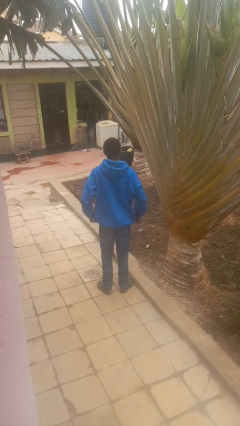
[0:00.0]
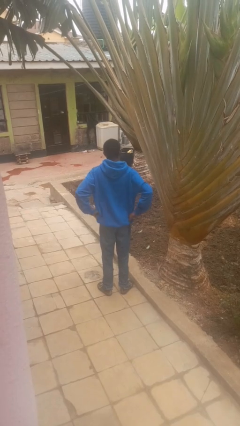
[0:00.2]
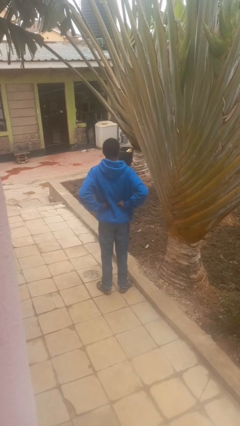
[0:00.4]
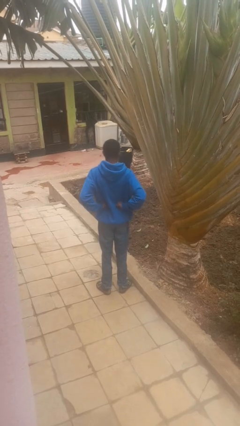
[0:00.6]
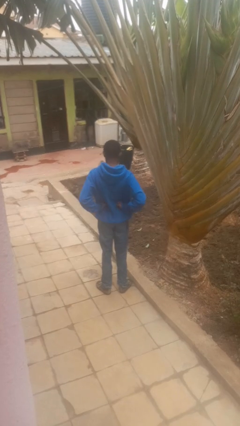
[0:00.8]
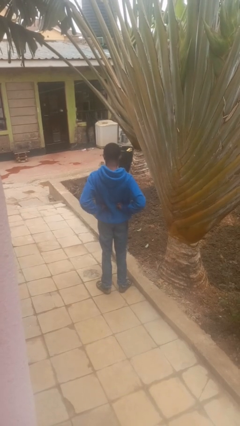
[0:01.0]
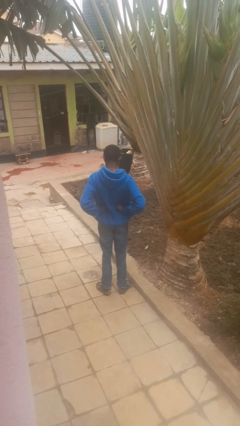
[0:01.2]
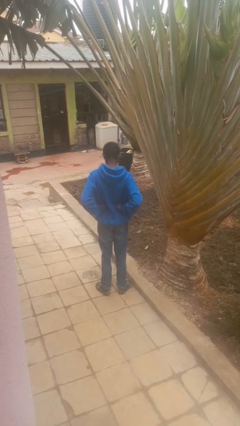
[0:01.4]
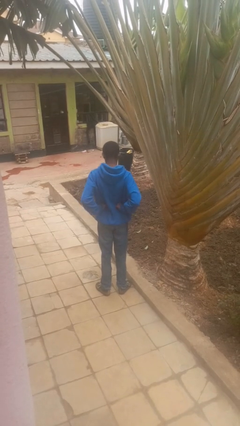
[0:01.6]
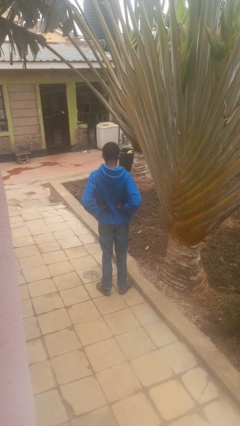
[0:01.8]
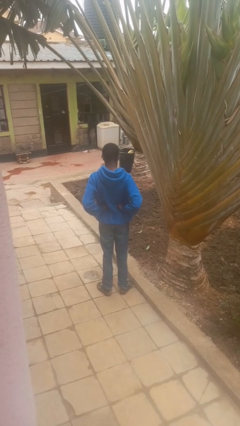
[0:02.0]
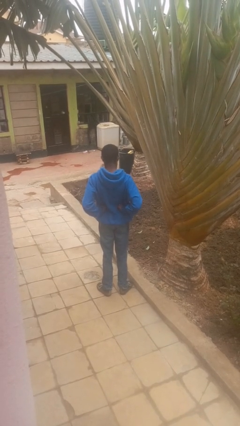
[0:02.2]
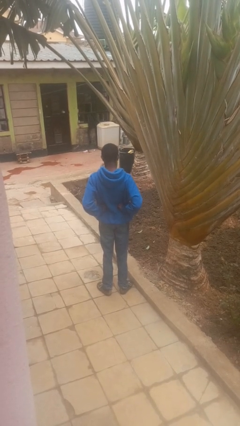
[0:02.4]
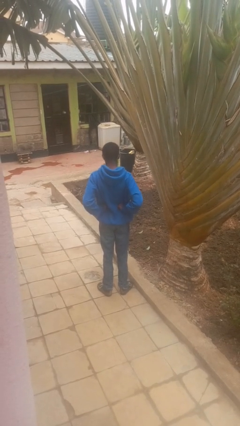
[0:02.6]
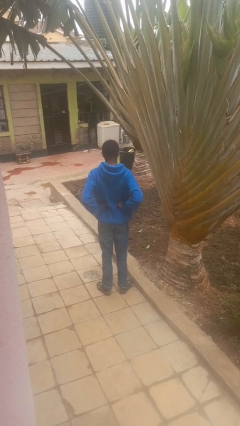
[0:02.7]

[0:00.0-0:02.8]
person stretches back

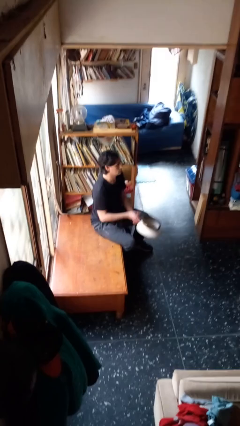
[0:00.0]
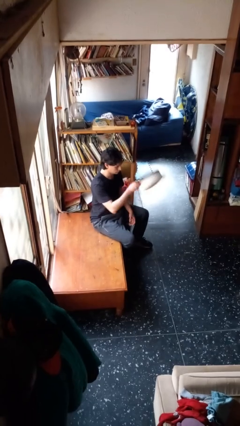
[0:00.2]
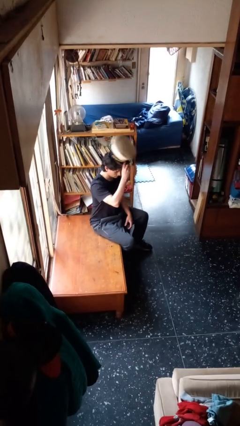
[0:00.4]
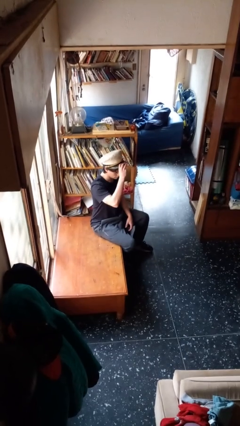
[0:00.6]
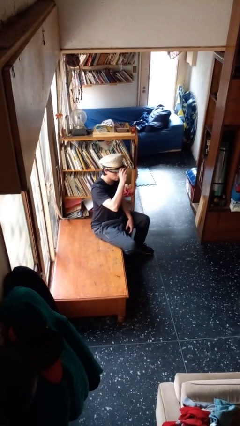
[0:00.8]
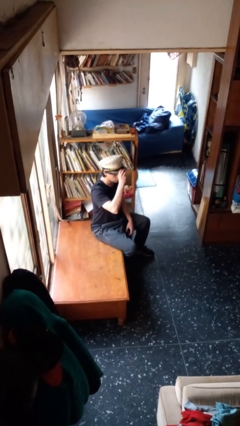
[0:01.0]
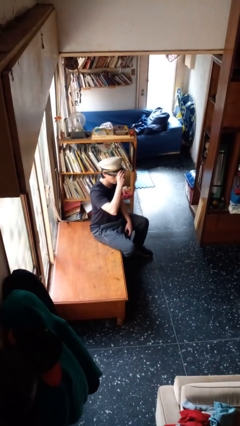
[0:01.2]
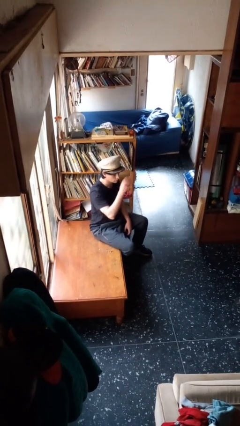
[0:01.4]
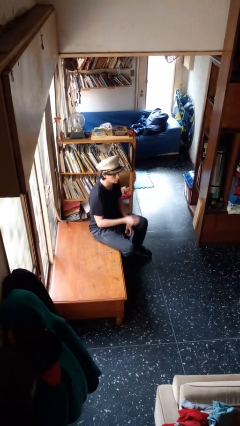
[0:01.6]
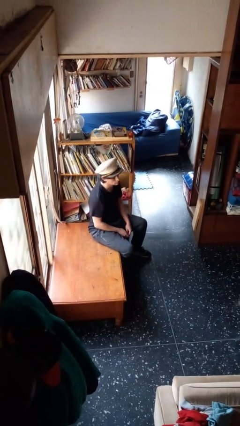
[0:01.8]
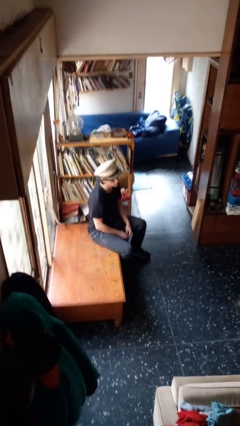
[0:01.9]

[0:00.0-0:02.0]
person puts on hat

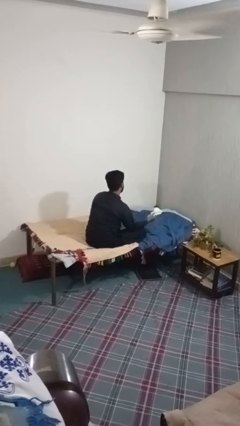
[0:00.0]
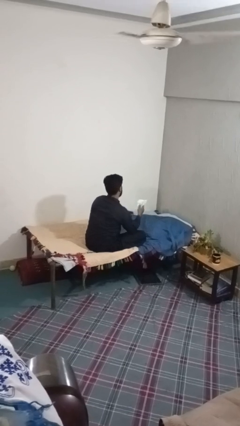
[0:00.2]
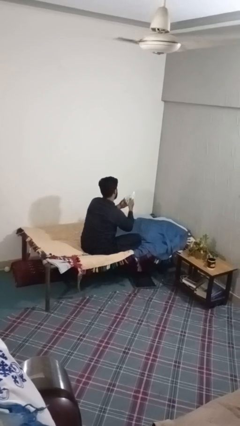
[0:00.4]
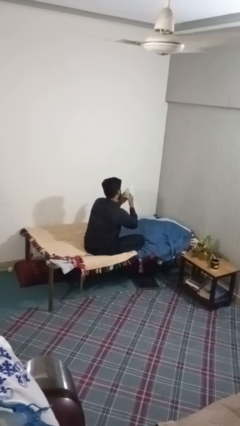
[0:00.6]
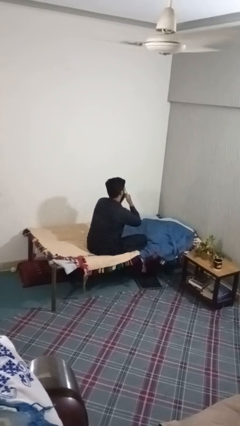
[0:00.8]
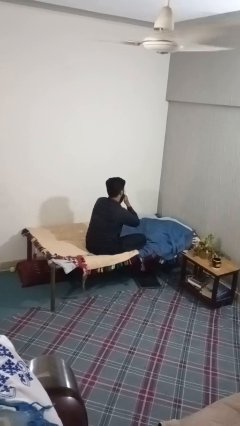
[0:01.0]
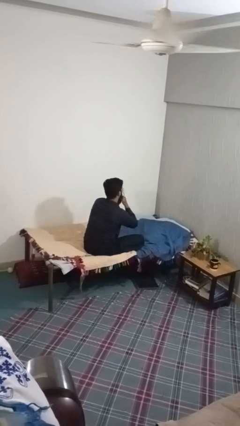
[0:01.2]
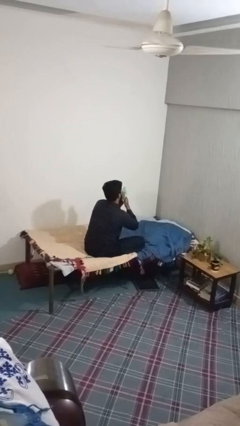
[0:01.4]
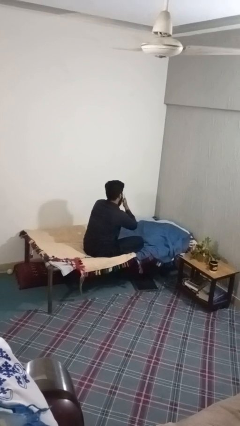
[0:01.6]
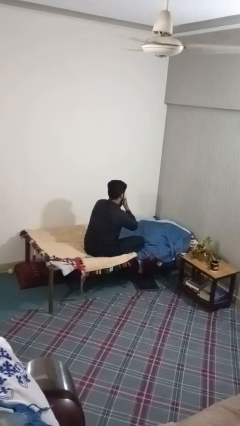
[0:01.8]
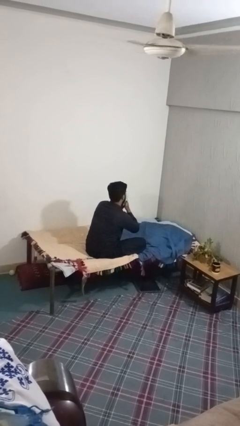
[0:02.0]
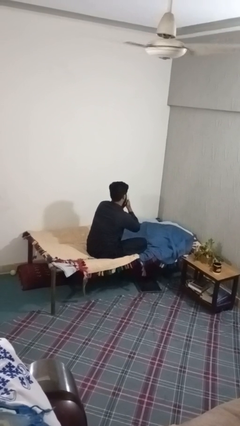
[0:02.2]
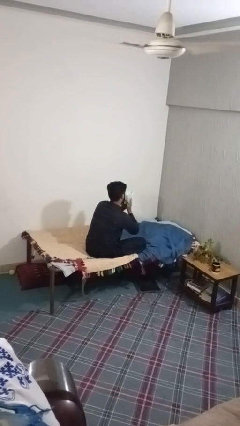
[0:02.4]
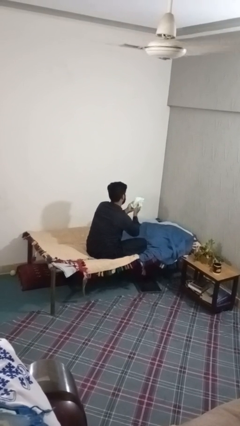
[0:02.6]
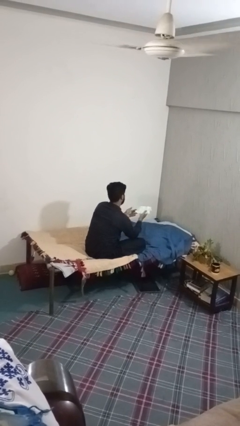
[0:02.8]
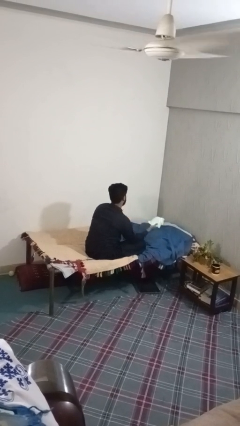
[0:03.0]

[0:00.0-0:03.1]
person blows nose

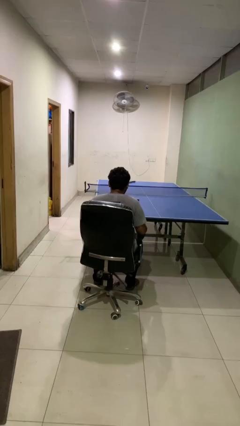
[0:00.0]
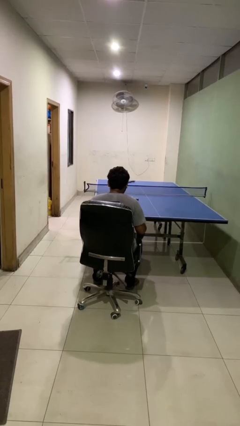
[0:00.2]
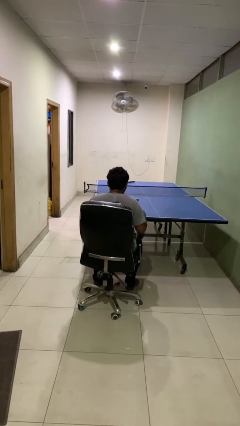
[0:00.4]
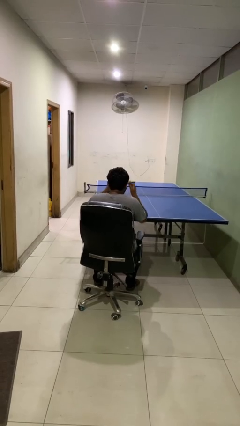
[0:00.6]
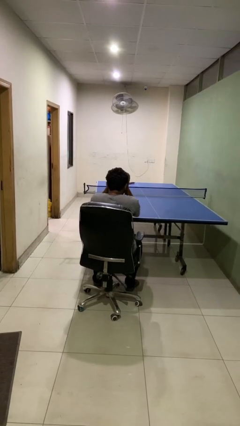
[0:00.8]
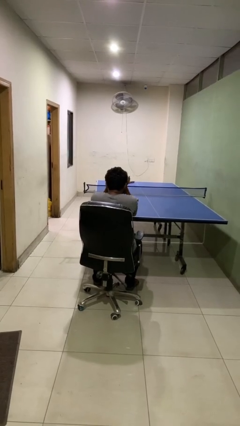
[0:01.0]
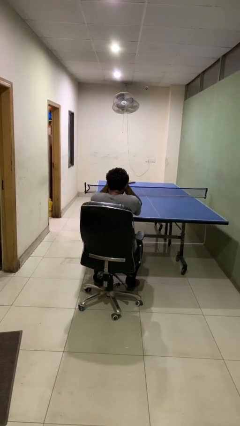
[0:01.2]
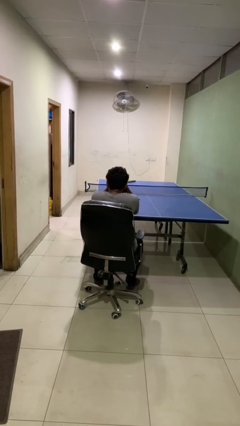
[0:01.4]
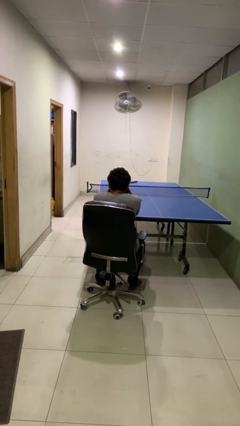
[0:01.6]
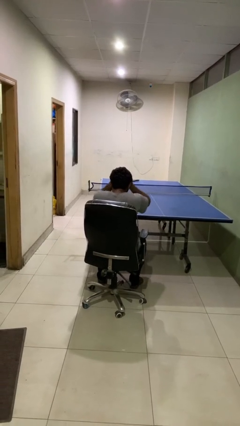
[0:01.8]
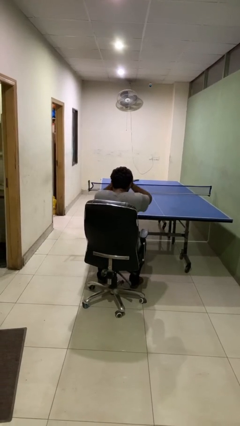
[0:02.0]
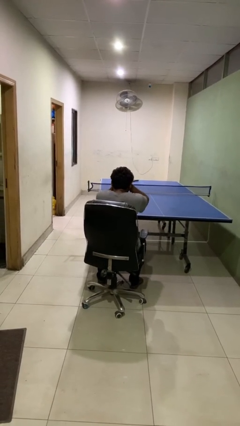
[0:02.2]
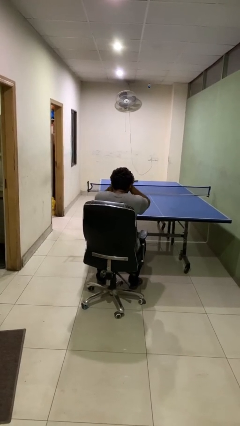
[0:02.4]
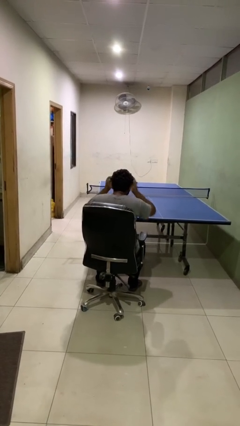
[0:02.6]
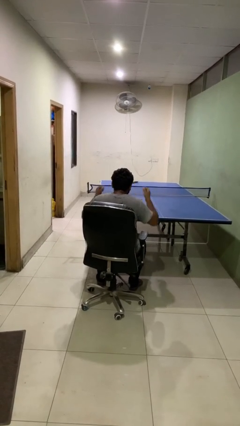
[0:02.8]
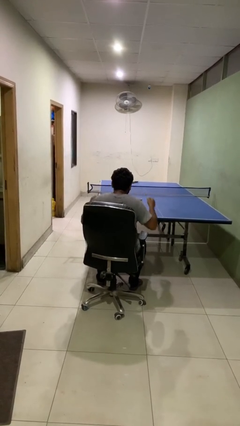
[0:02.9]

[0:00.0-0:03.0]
person rubs eyes

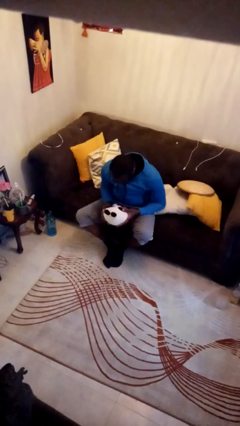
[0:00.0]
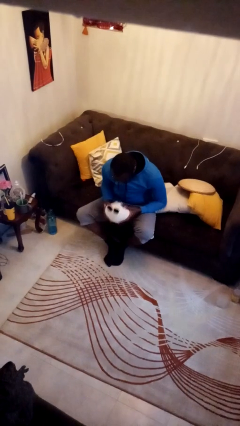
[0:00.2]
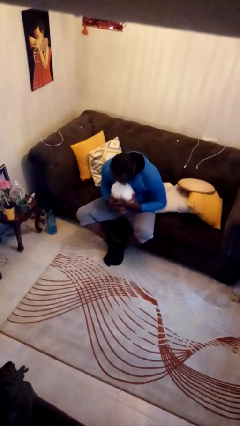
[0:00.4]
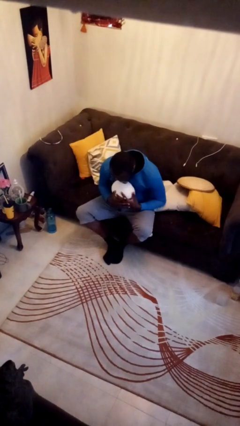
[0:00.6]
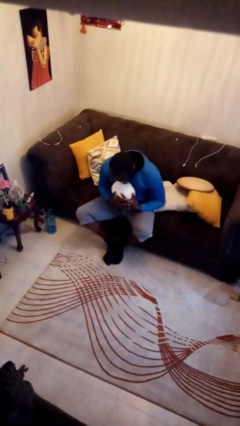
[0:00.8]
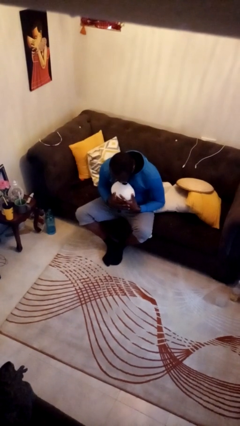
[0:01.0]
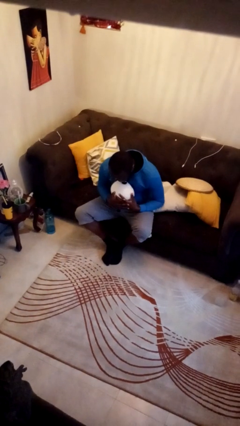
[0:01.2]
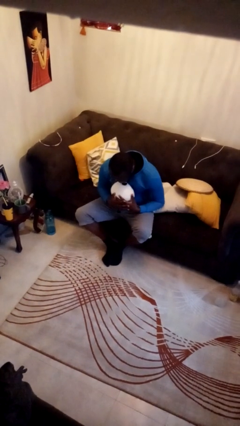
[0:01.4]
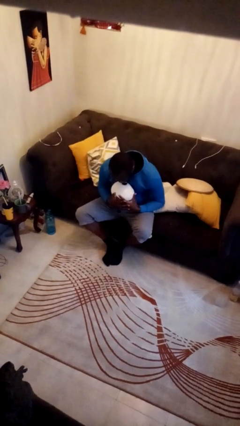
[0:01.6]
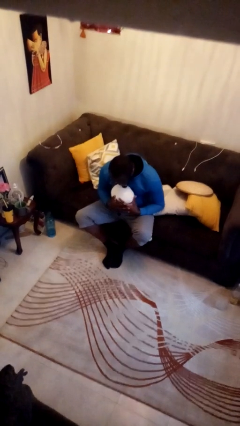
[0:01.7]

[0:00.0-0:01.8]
person hugs stuffed animal

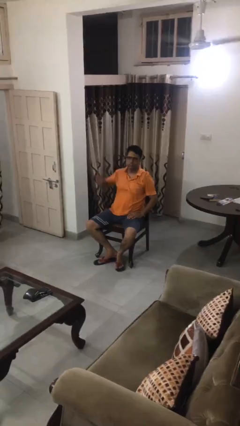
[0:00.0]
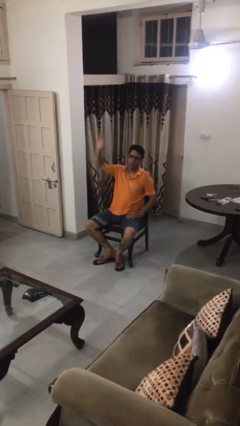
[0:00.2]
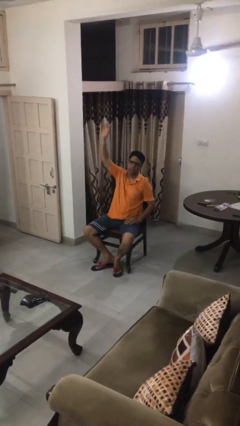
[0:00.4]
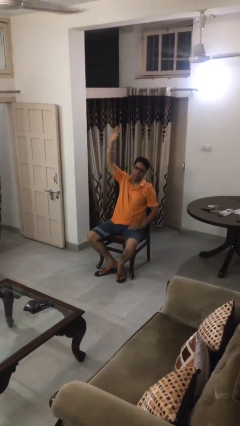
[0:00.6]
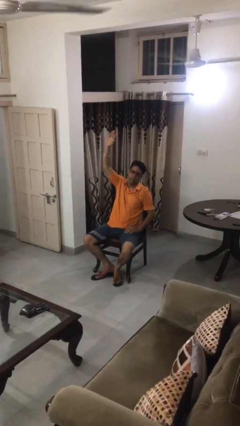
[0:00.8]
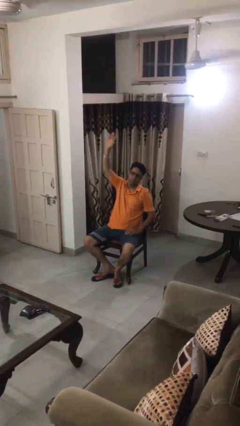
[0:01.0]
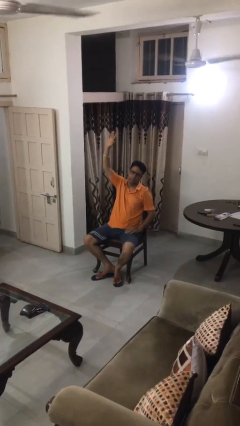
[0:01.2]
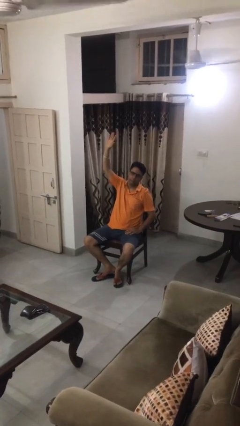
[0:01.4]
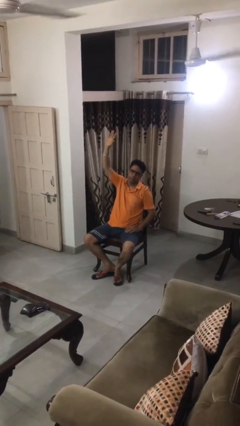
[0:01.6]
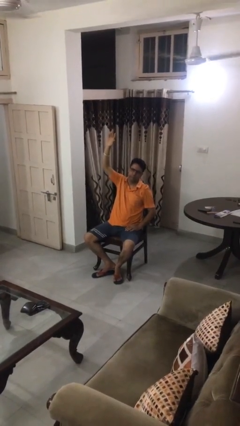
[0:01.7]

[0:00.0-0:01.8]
person gestures raise hand

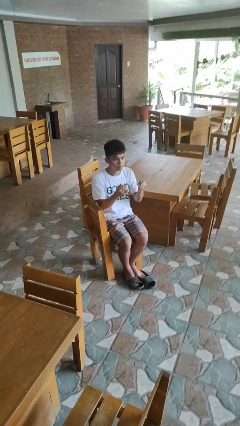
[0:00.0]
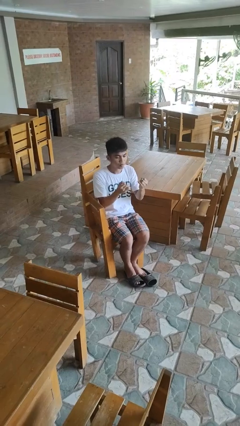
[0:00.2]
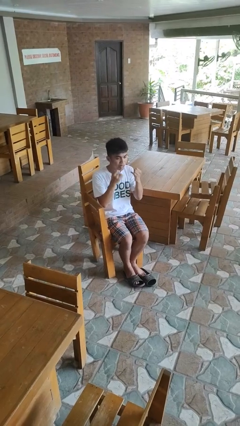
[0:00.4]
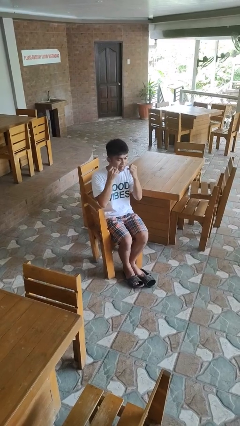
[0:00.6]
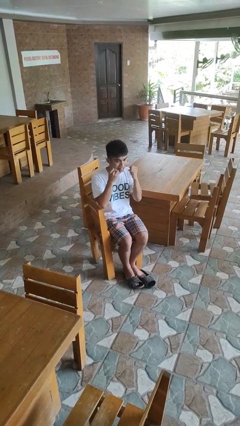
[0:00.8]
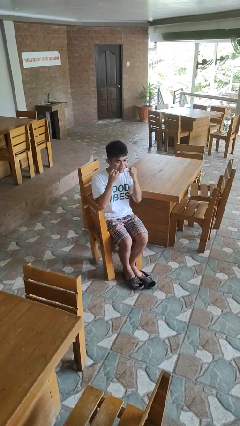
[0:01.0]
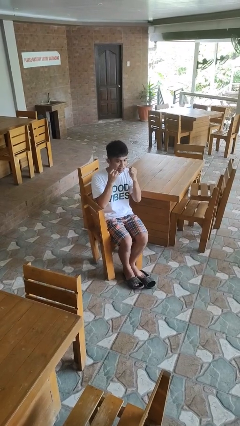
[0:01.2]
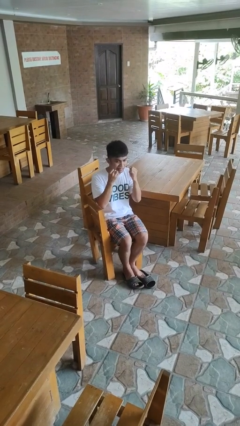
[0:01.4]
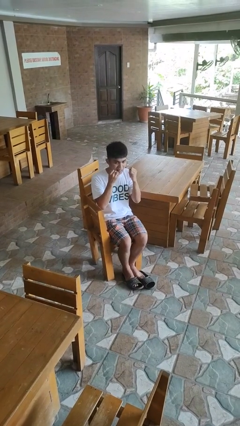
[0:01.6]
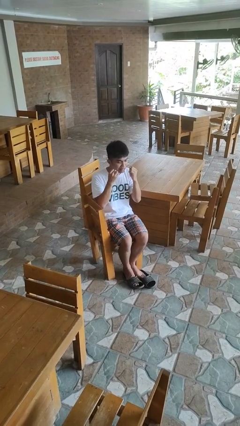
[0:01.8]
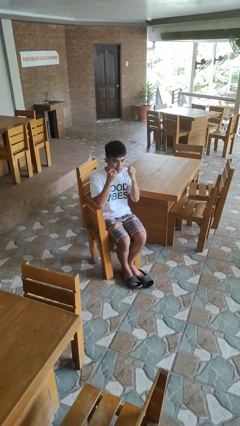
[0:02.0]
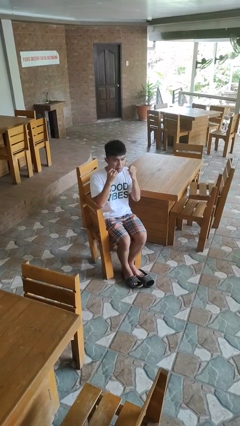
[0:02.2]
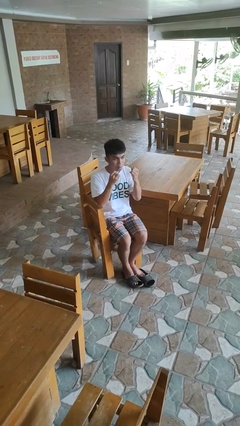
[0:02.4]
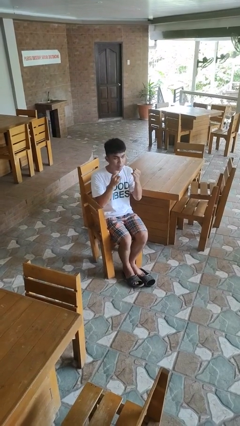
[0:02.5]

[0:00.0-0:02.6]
person flosses
